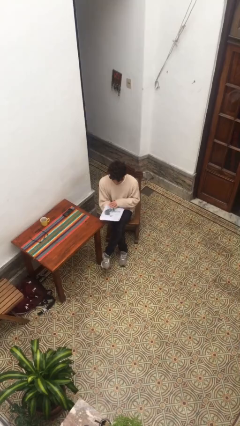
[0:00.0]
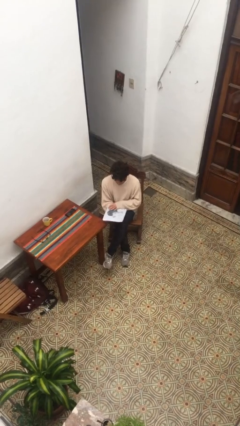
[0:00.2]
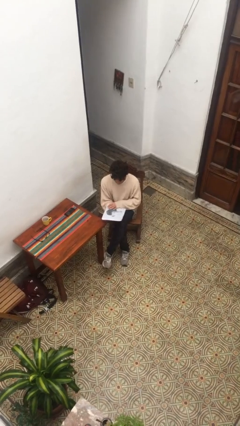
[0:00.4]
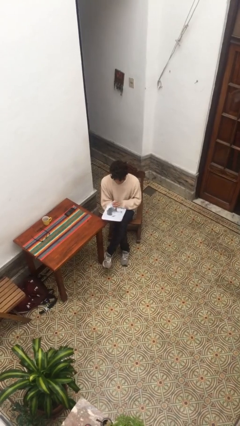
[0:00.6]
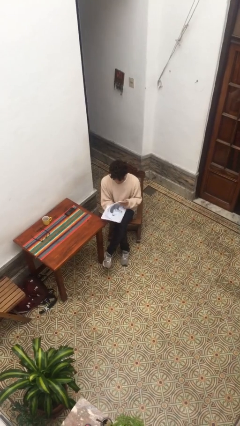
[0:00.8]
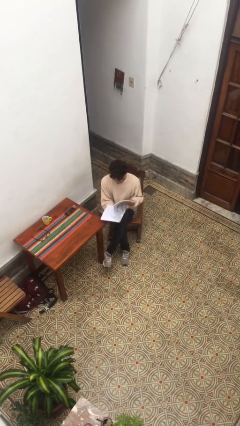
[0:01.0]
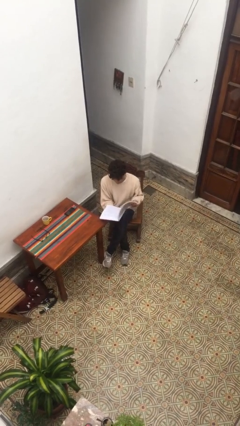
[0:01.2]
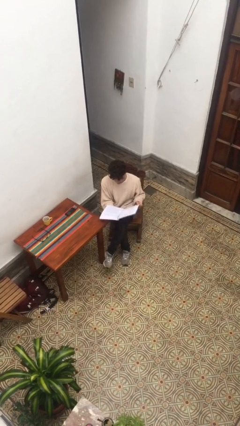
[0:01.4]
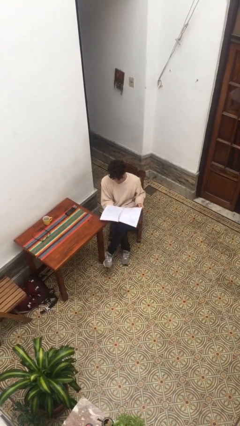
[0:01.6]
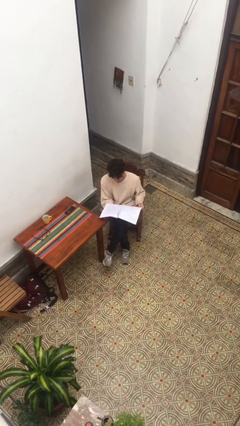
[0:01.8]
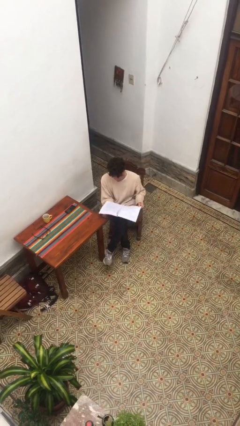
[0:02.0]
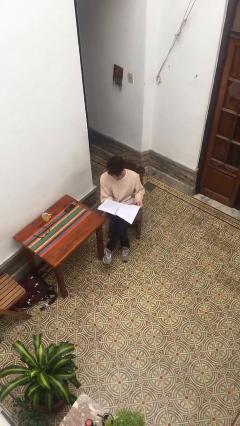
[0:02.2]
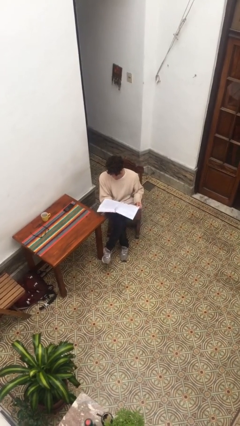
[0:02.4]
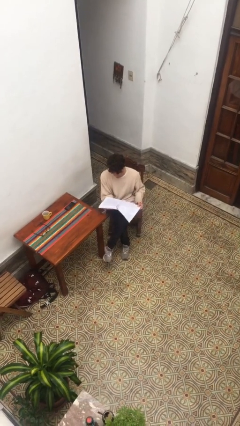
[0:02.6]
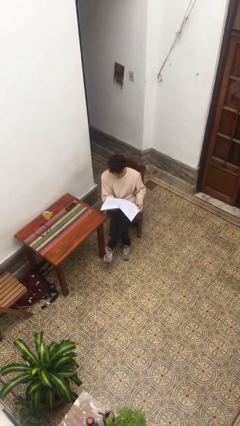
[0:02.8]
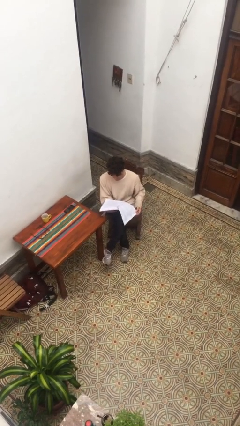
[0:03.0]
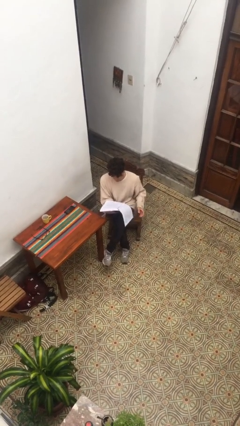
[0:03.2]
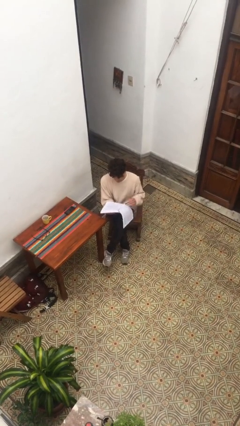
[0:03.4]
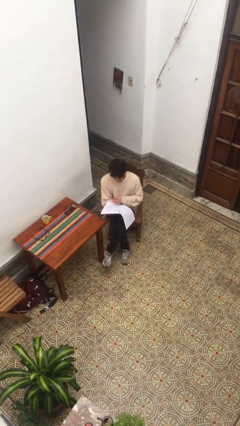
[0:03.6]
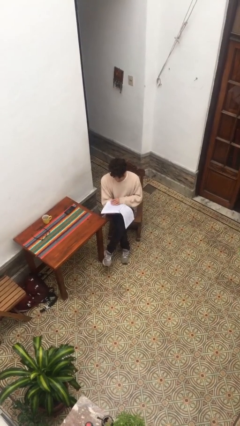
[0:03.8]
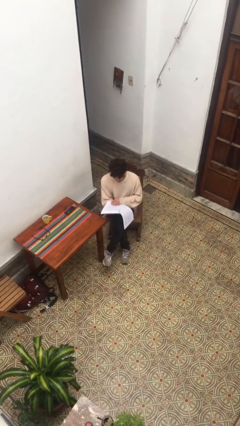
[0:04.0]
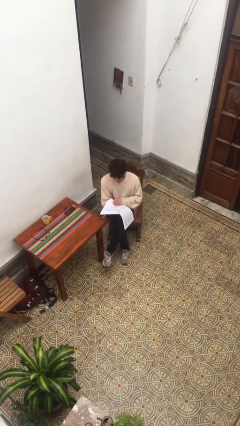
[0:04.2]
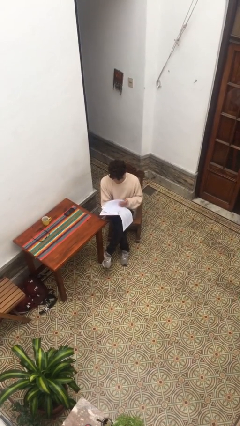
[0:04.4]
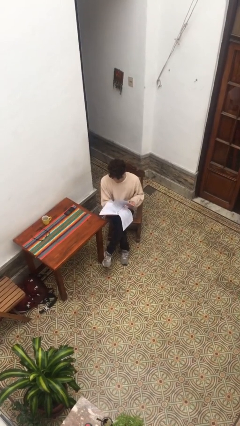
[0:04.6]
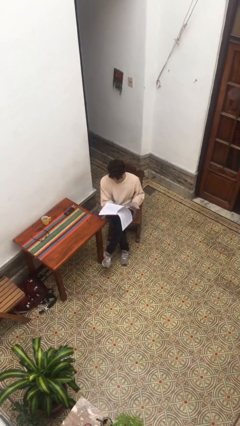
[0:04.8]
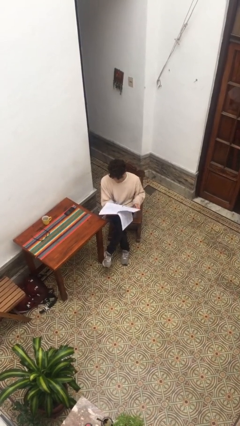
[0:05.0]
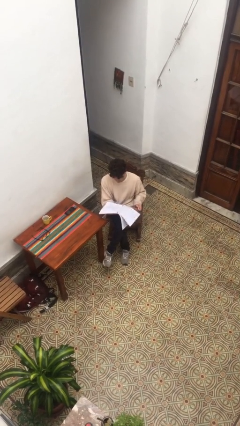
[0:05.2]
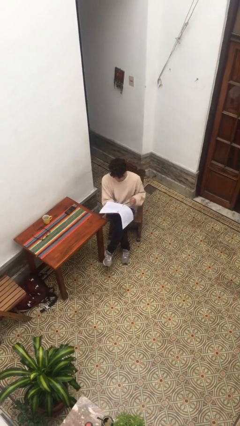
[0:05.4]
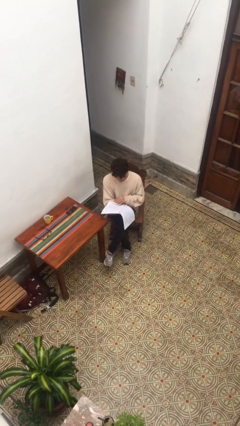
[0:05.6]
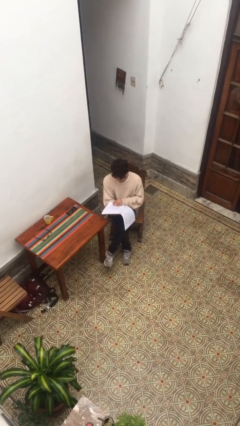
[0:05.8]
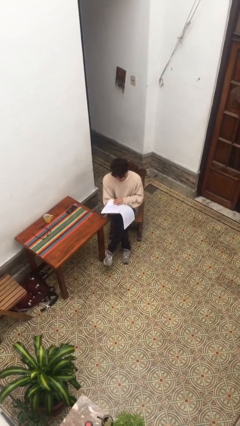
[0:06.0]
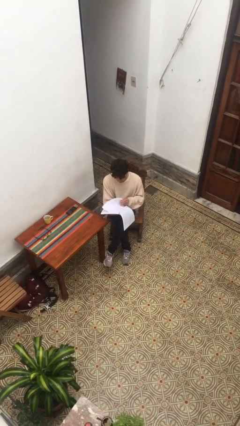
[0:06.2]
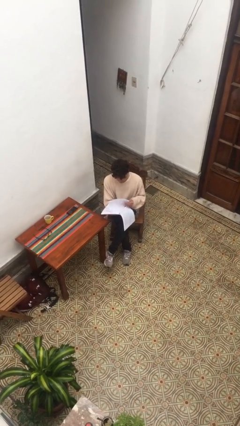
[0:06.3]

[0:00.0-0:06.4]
person reads document

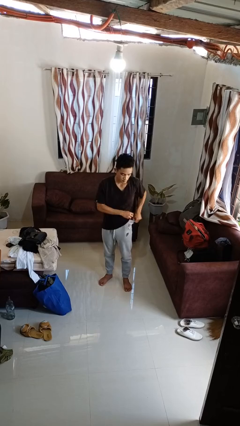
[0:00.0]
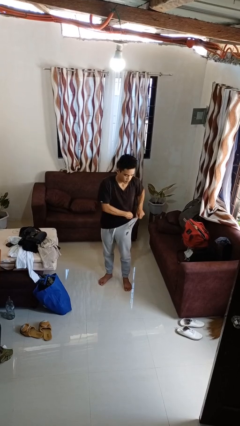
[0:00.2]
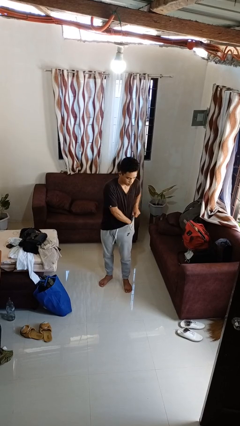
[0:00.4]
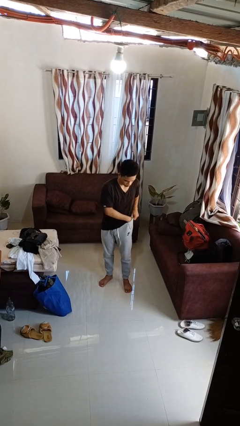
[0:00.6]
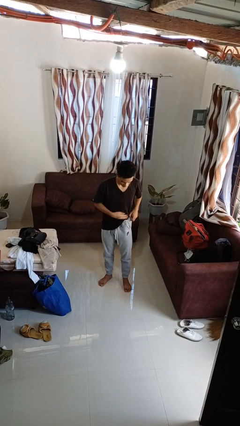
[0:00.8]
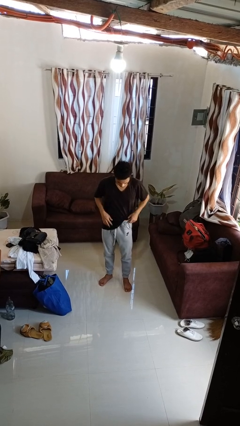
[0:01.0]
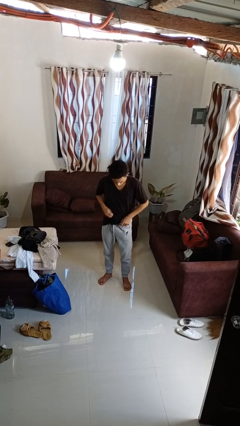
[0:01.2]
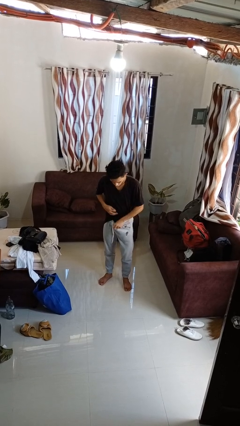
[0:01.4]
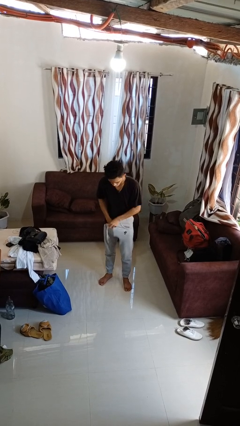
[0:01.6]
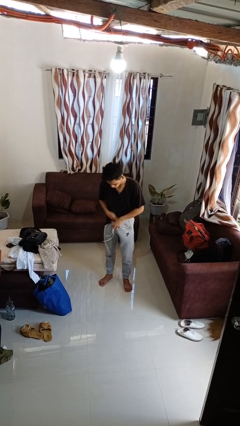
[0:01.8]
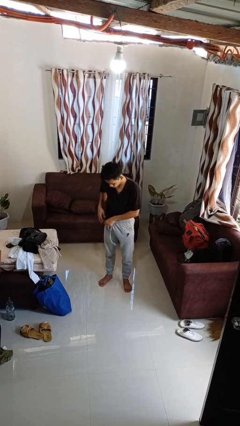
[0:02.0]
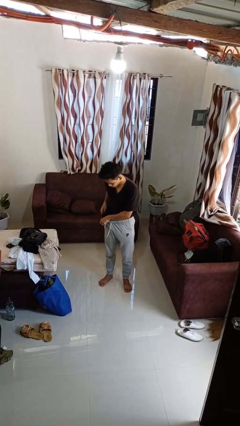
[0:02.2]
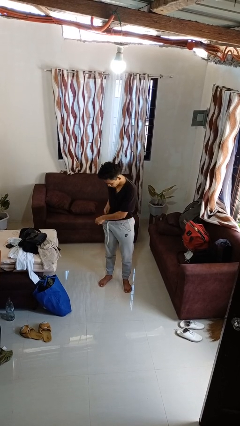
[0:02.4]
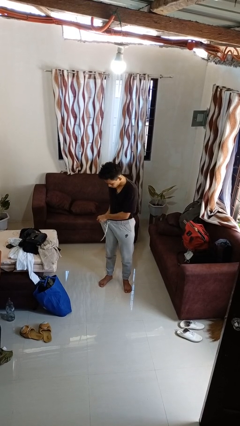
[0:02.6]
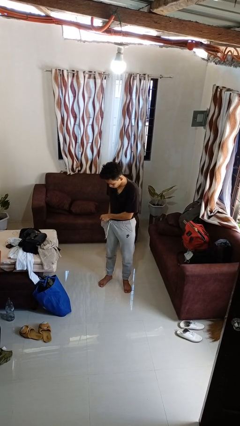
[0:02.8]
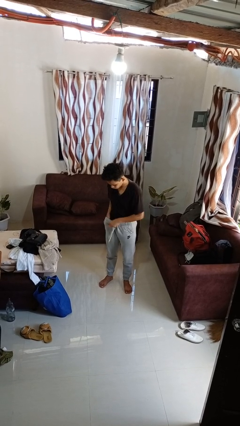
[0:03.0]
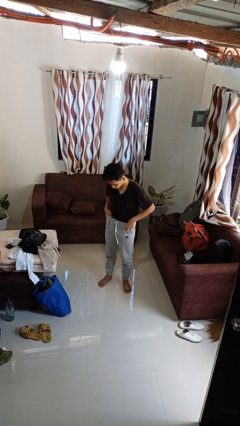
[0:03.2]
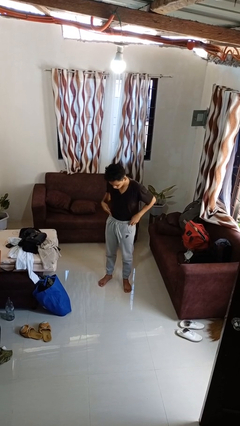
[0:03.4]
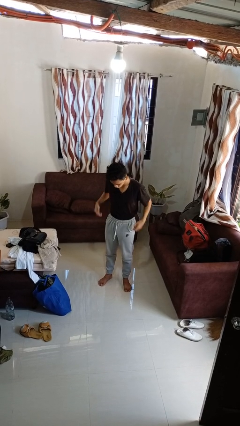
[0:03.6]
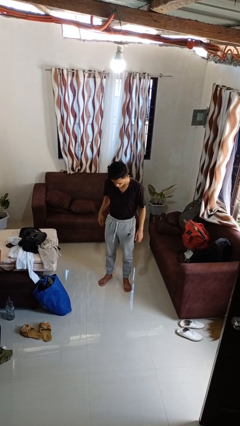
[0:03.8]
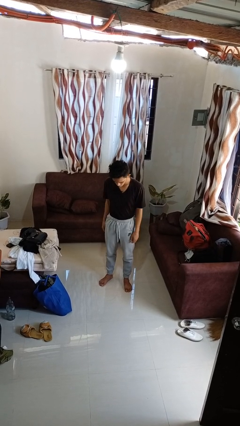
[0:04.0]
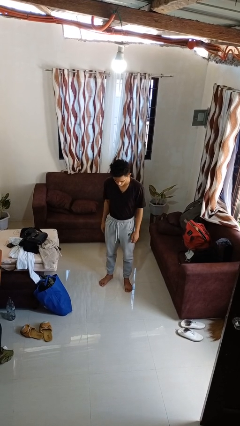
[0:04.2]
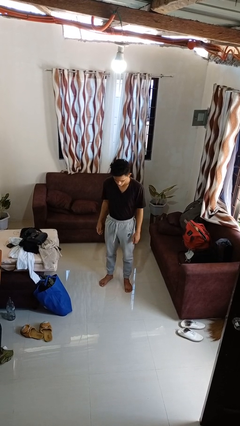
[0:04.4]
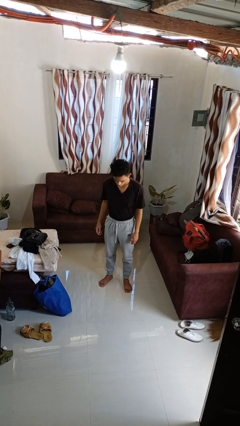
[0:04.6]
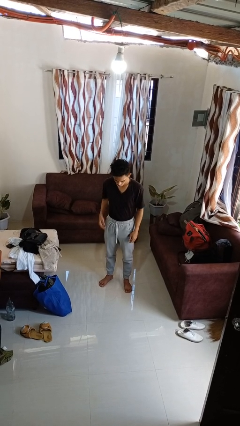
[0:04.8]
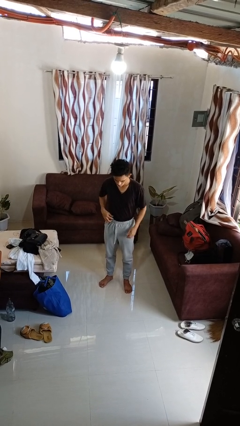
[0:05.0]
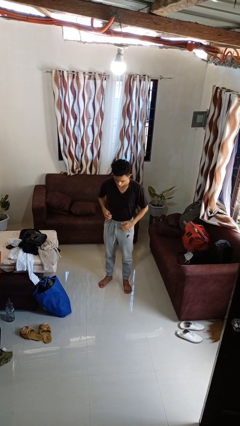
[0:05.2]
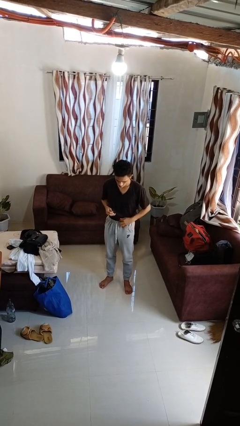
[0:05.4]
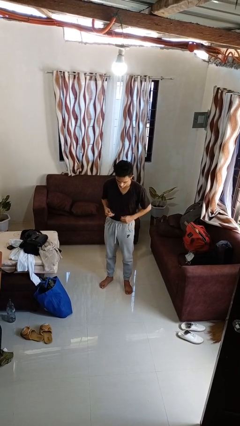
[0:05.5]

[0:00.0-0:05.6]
person tucks in shirt

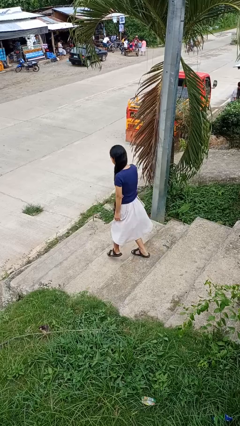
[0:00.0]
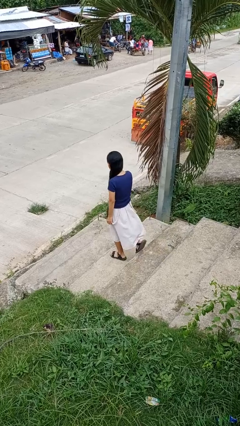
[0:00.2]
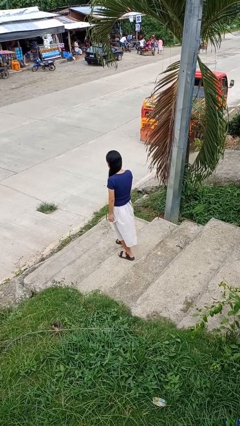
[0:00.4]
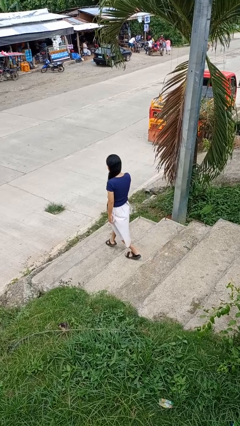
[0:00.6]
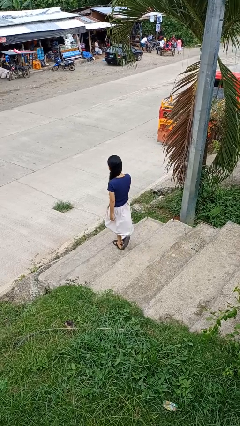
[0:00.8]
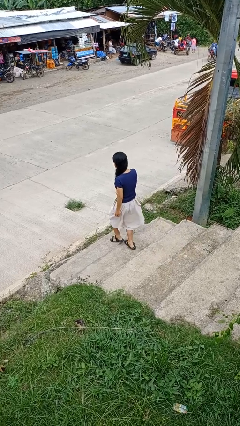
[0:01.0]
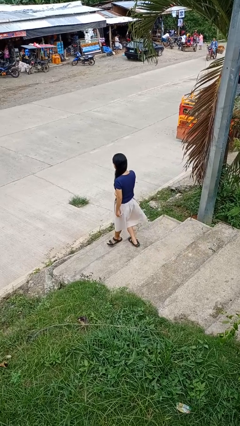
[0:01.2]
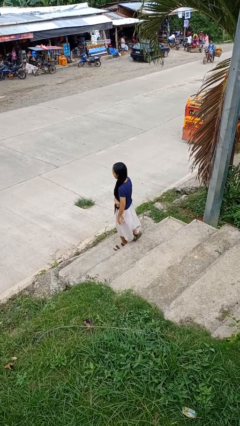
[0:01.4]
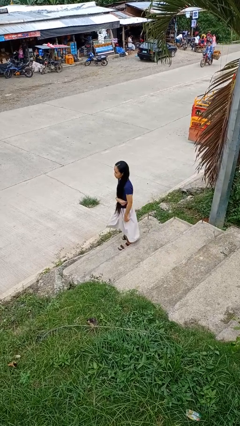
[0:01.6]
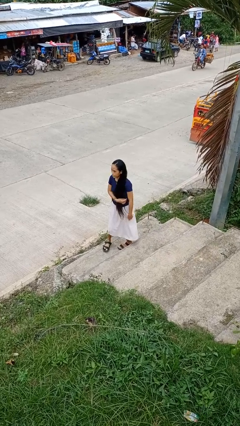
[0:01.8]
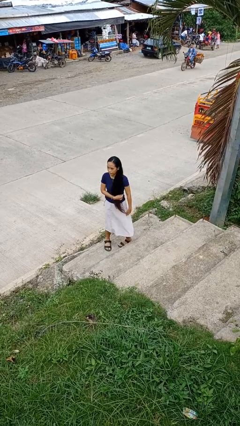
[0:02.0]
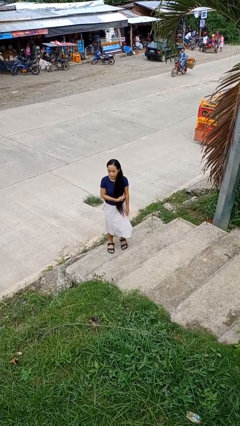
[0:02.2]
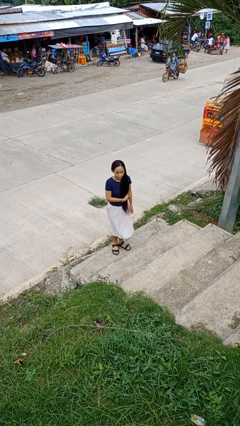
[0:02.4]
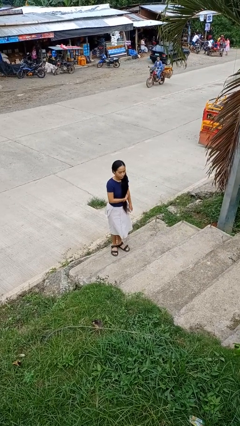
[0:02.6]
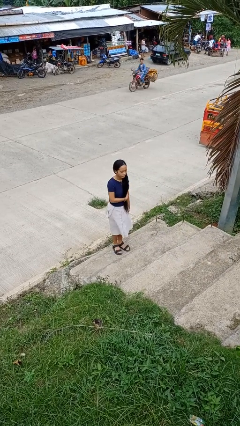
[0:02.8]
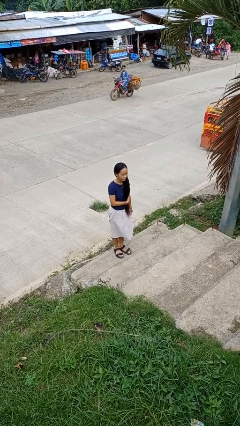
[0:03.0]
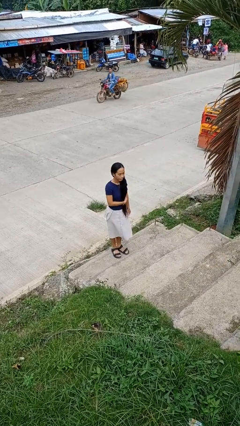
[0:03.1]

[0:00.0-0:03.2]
person climbs down stairs

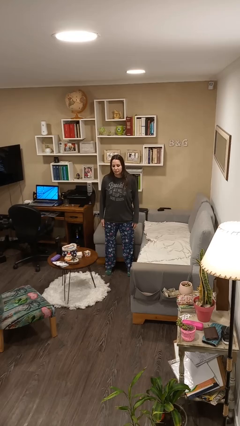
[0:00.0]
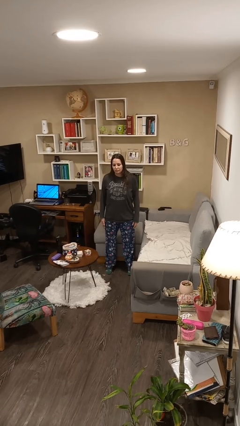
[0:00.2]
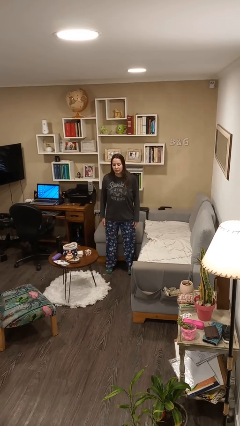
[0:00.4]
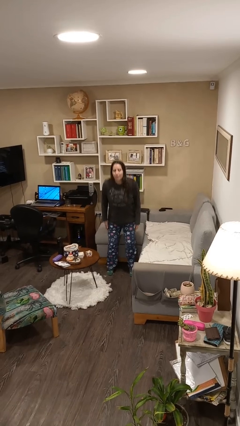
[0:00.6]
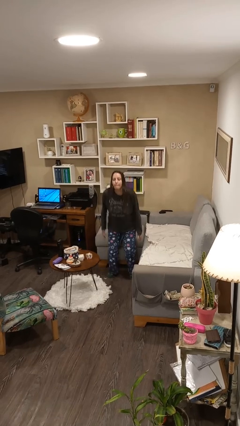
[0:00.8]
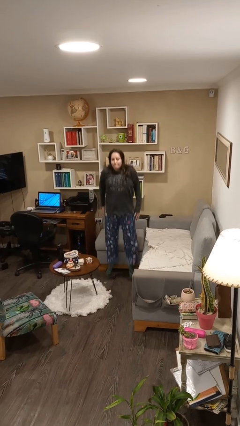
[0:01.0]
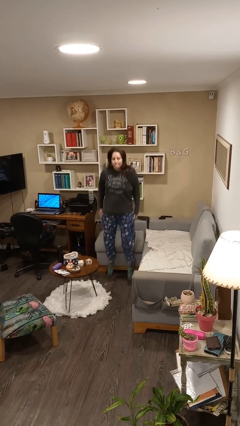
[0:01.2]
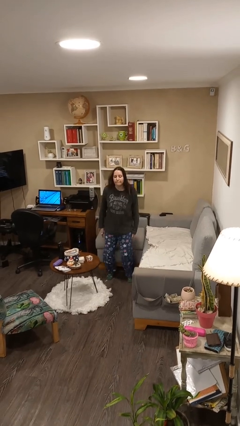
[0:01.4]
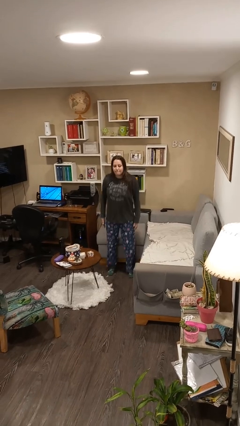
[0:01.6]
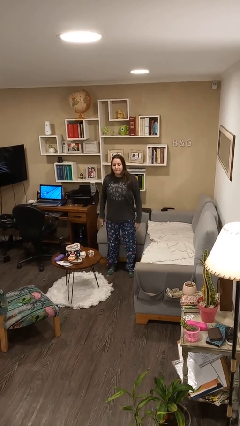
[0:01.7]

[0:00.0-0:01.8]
person jumps

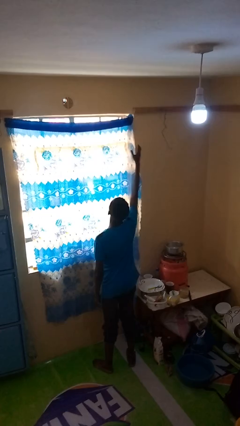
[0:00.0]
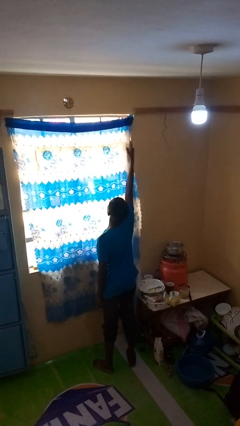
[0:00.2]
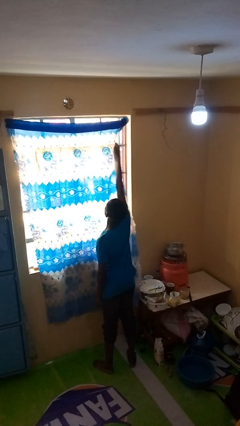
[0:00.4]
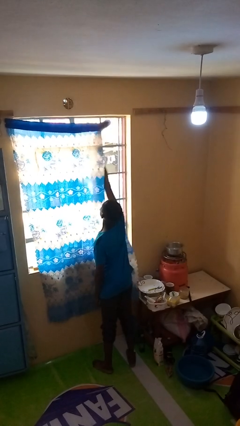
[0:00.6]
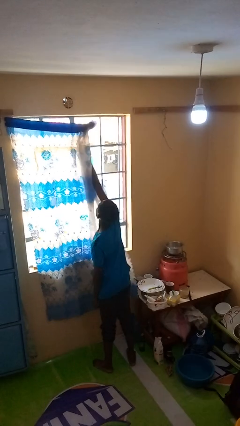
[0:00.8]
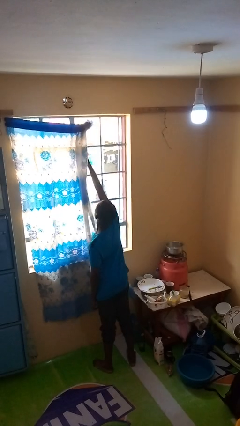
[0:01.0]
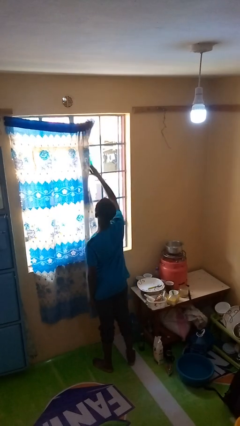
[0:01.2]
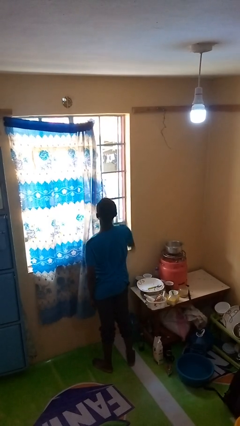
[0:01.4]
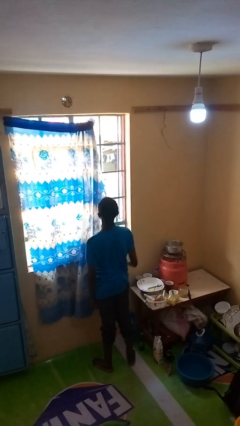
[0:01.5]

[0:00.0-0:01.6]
person opens curtains
